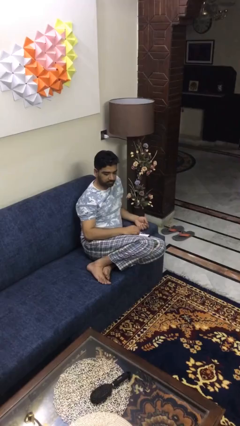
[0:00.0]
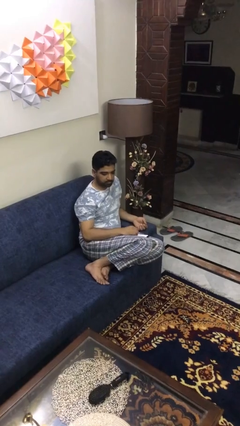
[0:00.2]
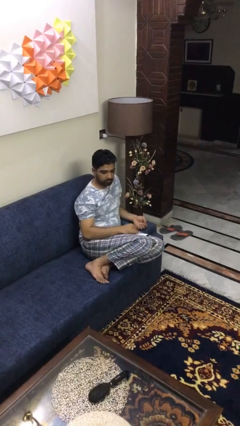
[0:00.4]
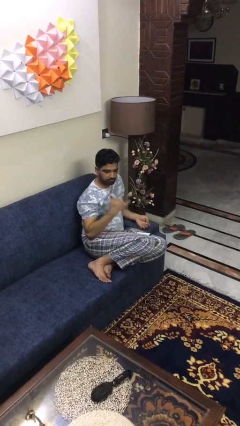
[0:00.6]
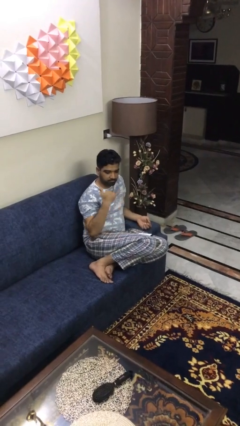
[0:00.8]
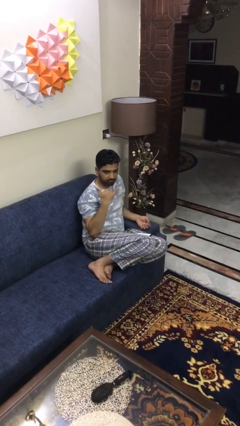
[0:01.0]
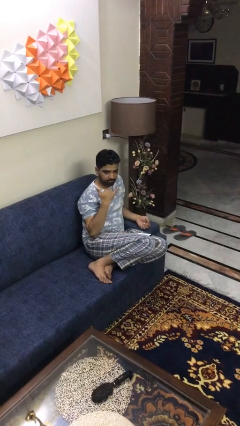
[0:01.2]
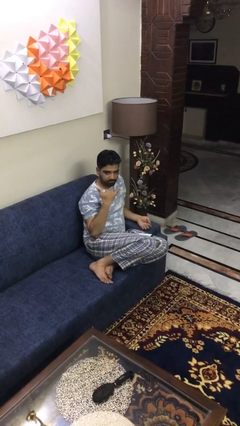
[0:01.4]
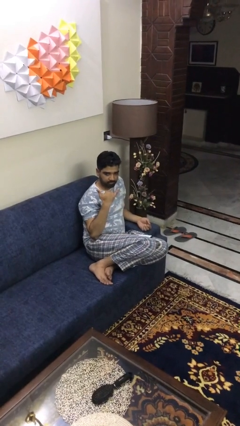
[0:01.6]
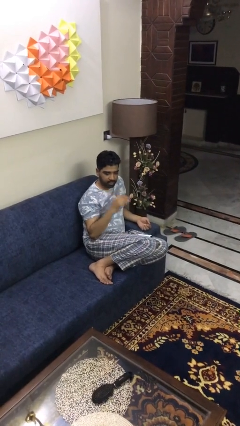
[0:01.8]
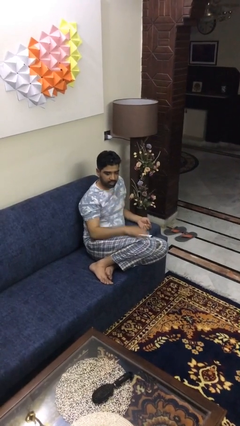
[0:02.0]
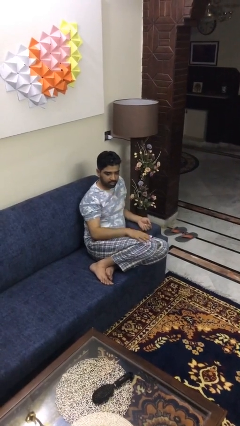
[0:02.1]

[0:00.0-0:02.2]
person gestures hang loose

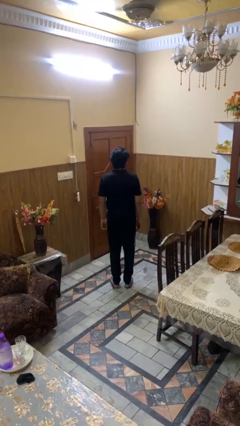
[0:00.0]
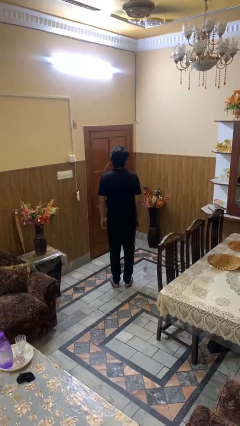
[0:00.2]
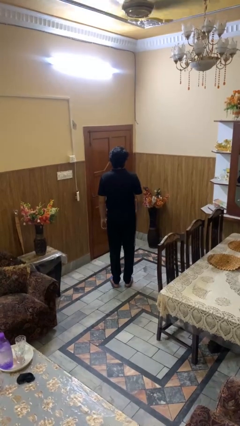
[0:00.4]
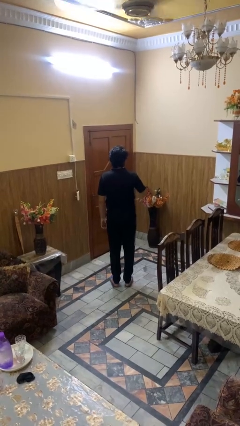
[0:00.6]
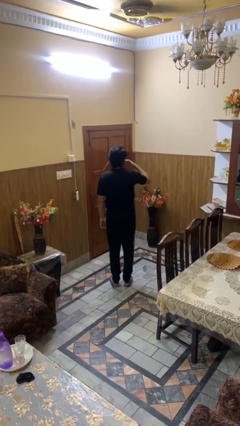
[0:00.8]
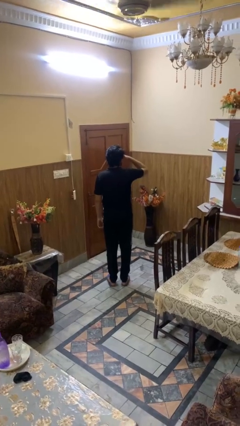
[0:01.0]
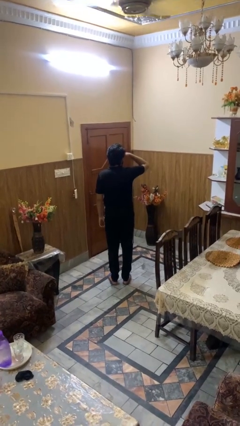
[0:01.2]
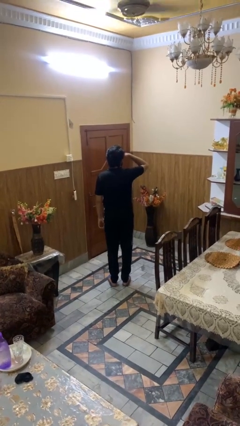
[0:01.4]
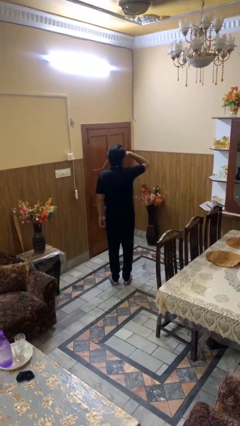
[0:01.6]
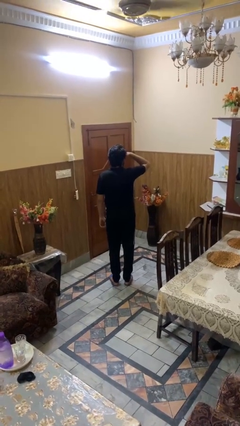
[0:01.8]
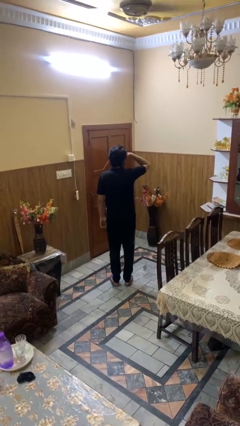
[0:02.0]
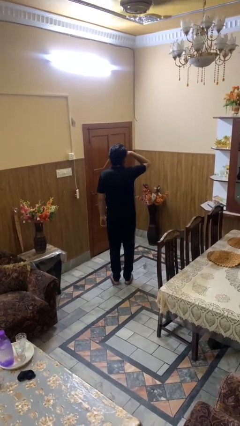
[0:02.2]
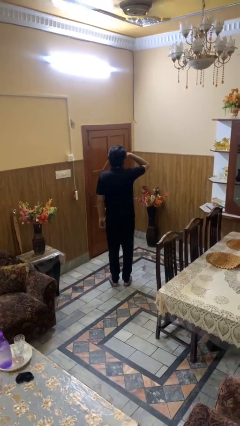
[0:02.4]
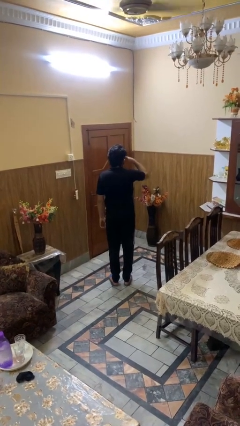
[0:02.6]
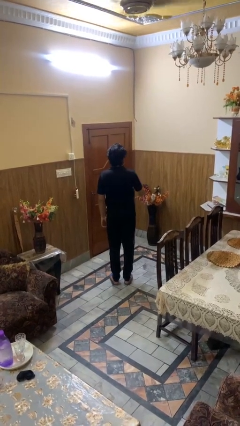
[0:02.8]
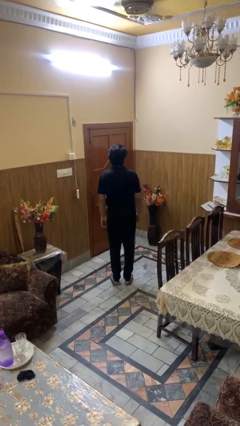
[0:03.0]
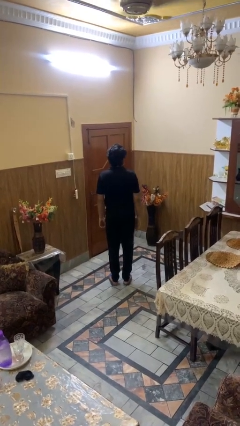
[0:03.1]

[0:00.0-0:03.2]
person shades eyes

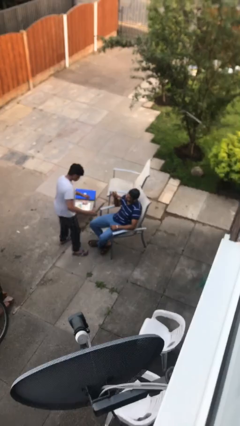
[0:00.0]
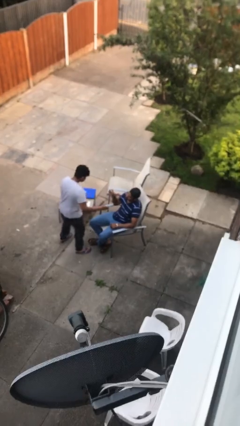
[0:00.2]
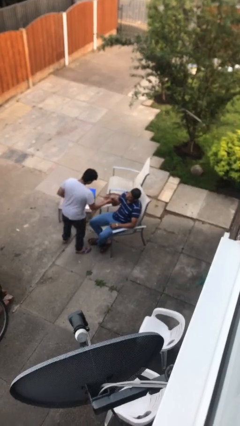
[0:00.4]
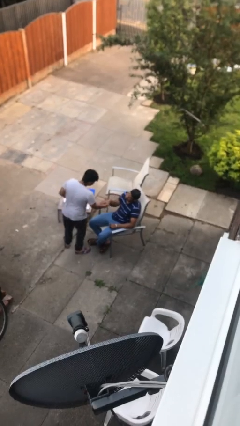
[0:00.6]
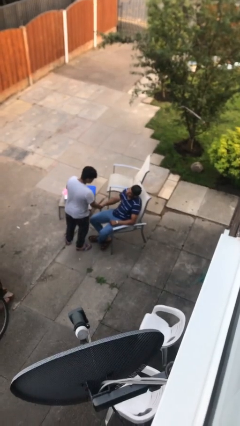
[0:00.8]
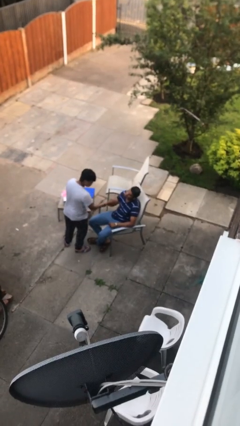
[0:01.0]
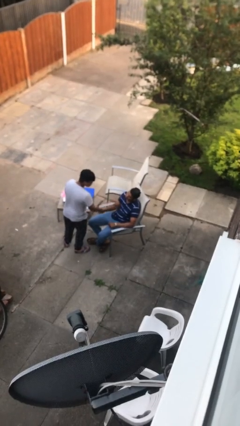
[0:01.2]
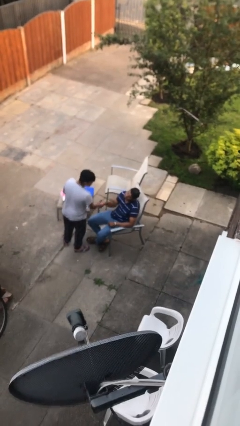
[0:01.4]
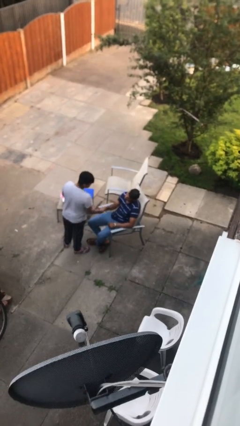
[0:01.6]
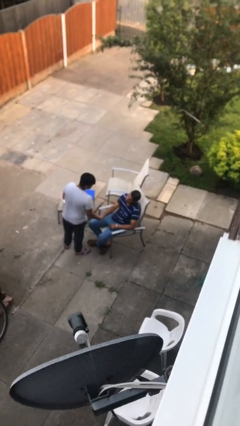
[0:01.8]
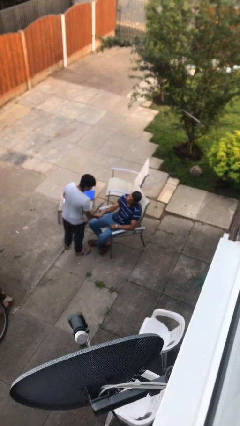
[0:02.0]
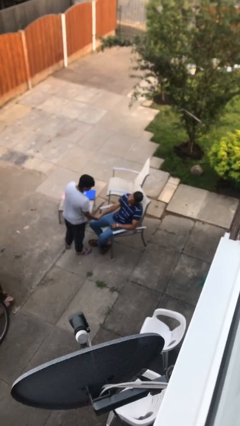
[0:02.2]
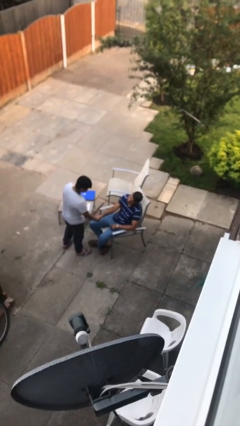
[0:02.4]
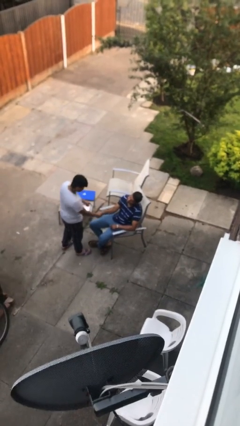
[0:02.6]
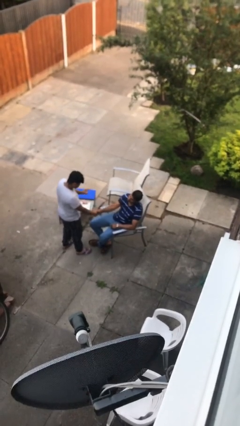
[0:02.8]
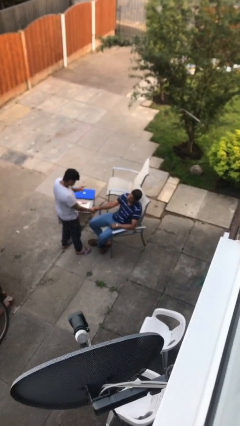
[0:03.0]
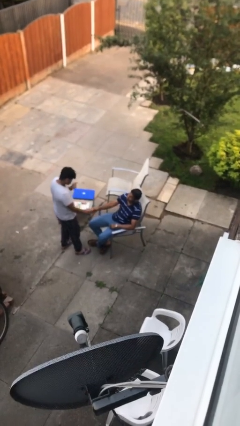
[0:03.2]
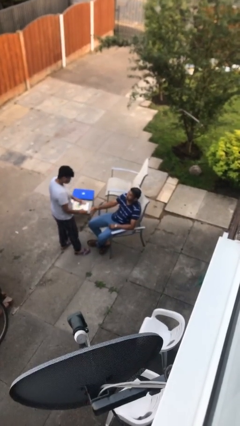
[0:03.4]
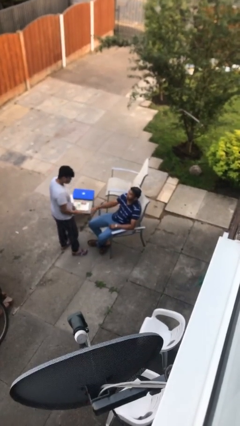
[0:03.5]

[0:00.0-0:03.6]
person shakes hand

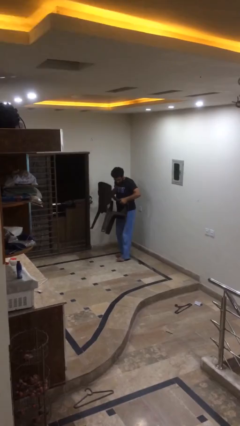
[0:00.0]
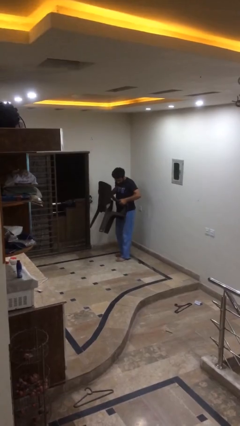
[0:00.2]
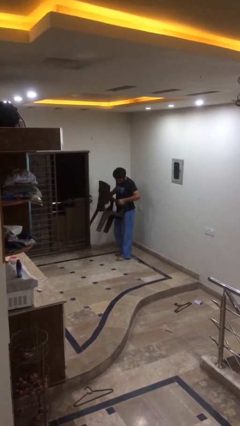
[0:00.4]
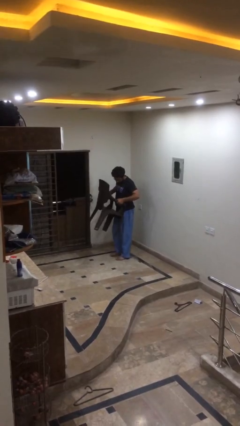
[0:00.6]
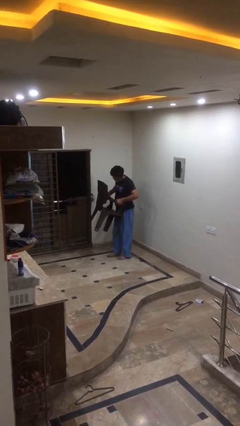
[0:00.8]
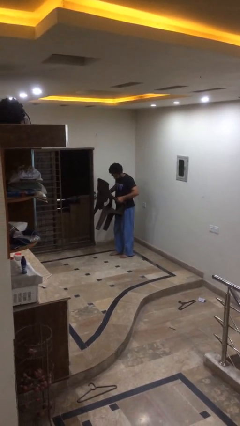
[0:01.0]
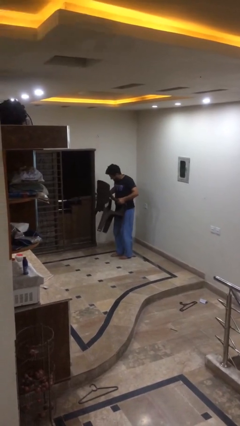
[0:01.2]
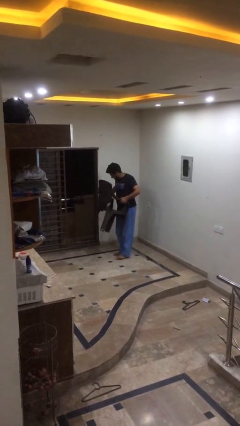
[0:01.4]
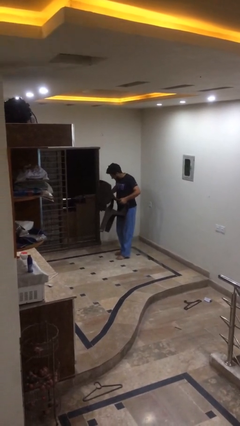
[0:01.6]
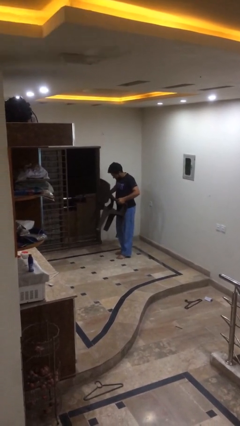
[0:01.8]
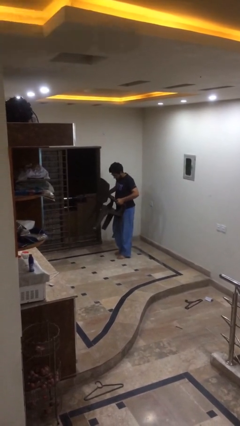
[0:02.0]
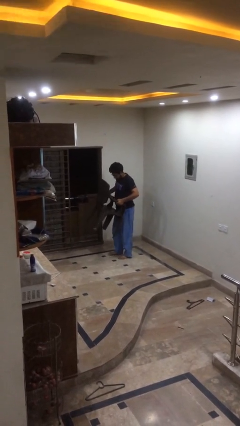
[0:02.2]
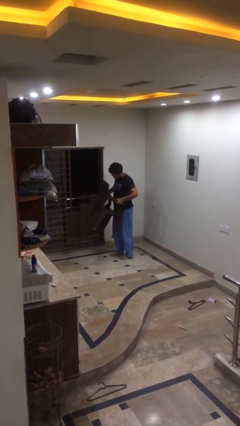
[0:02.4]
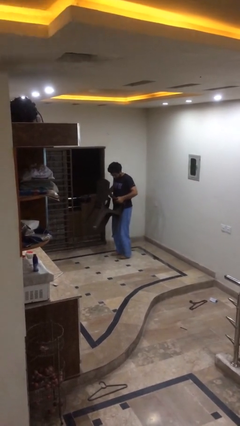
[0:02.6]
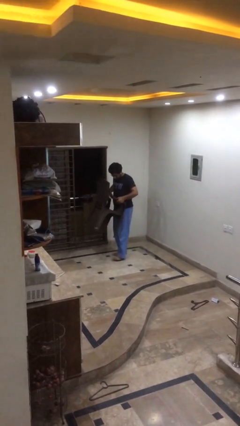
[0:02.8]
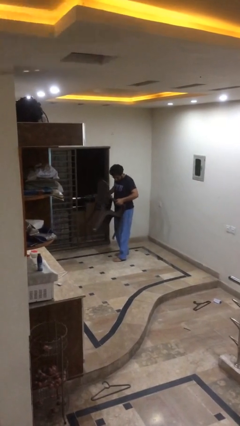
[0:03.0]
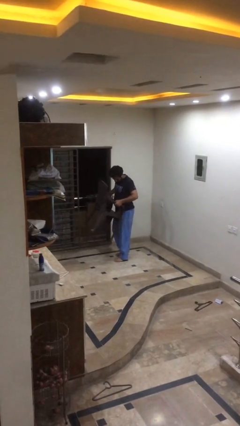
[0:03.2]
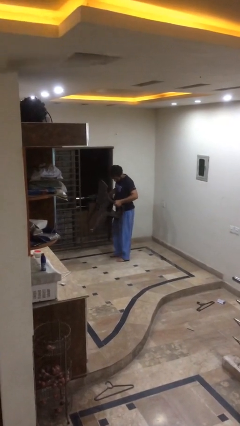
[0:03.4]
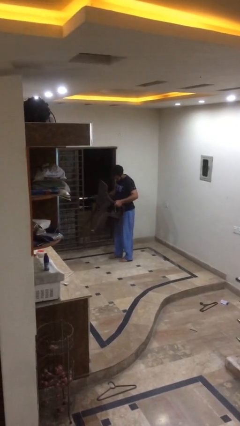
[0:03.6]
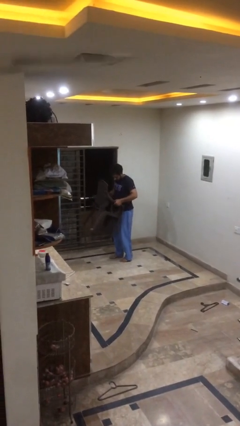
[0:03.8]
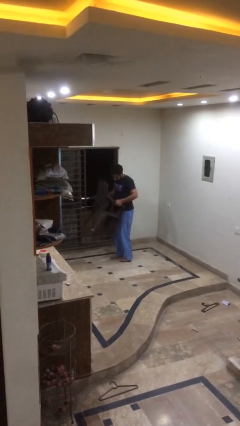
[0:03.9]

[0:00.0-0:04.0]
person carries heavy object

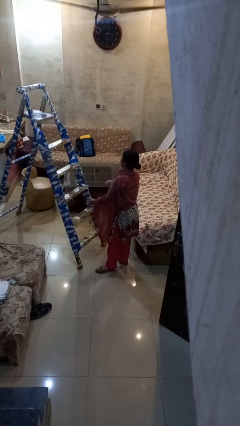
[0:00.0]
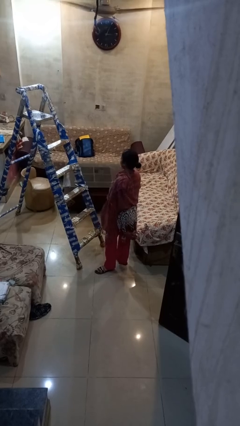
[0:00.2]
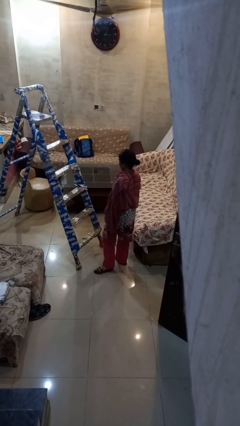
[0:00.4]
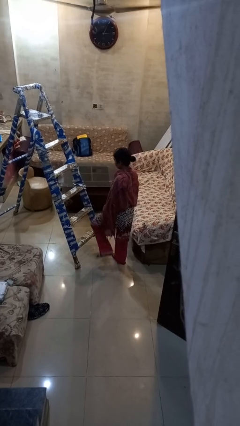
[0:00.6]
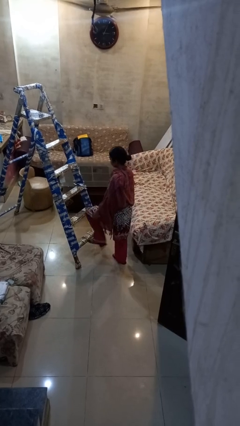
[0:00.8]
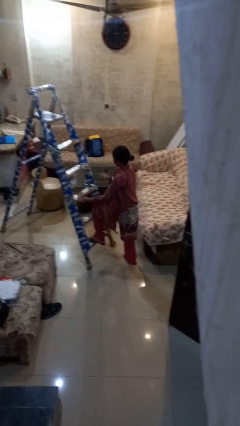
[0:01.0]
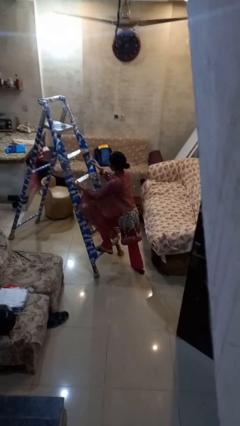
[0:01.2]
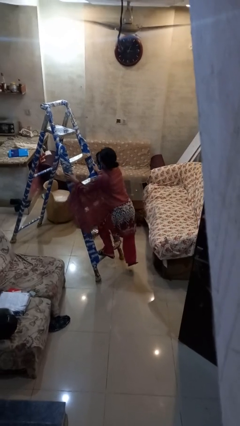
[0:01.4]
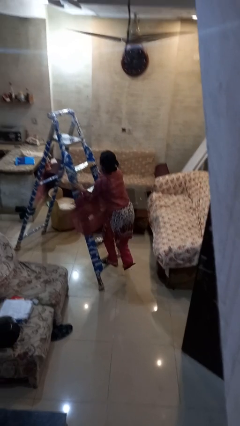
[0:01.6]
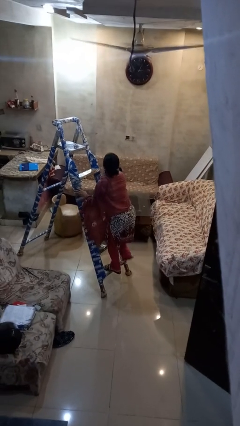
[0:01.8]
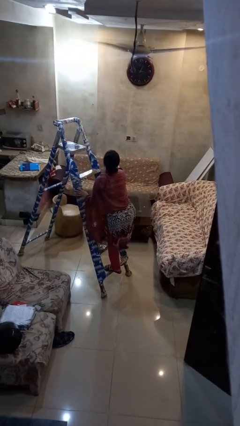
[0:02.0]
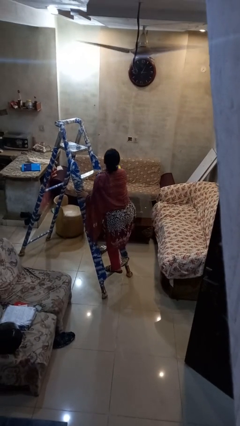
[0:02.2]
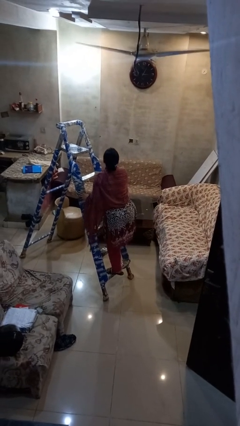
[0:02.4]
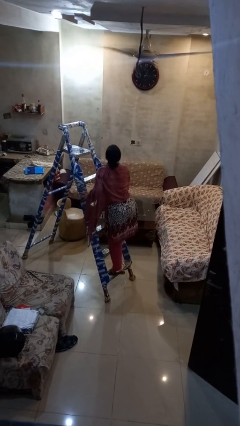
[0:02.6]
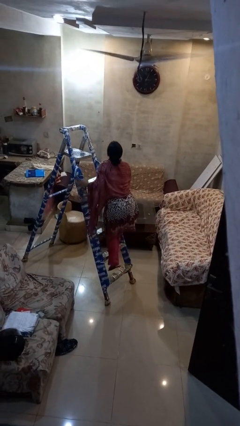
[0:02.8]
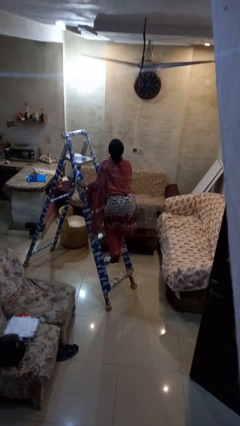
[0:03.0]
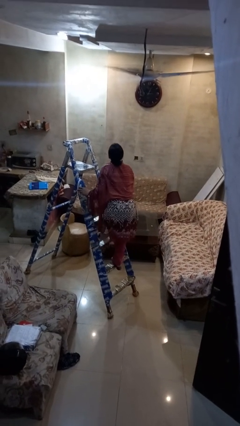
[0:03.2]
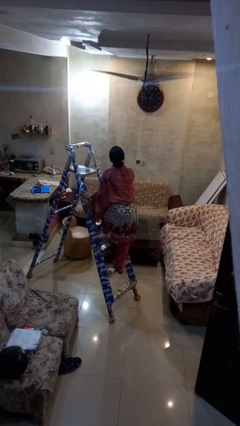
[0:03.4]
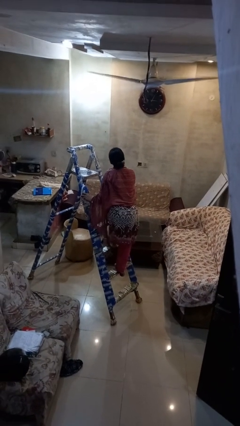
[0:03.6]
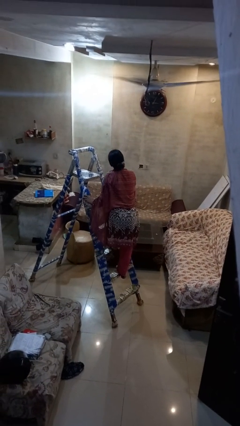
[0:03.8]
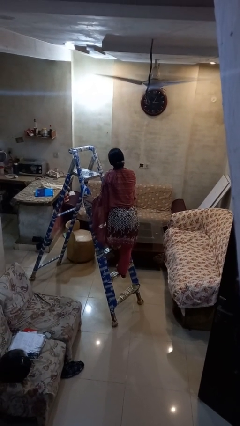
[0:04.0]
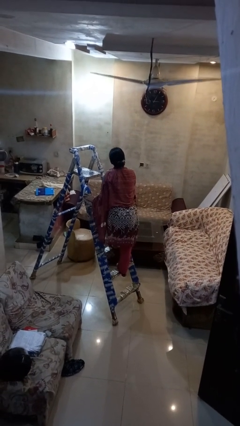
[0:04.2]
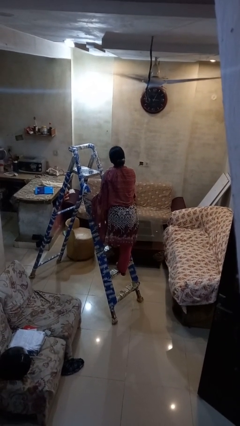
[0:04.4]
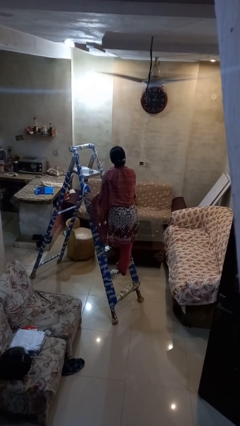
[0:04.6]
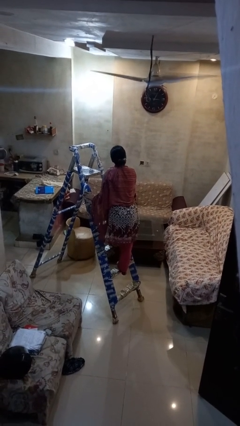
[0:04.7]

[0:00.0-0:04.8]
person climbs up ladder
